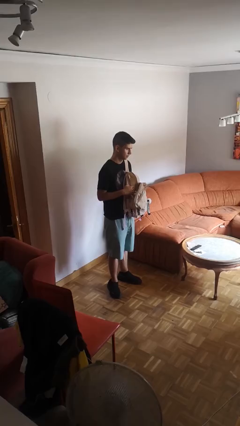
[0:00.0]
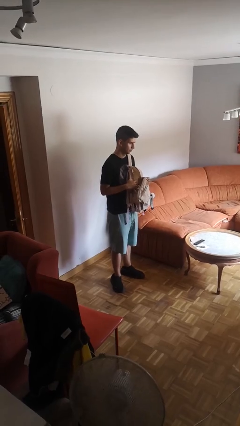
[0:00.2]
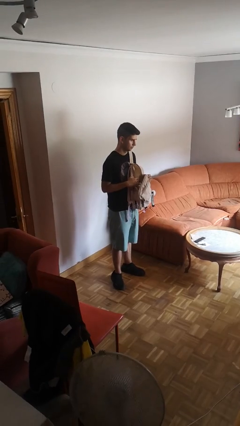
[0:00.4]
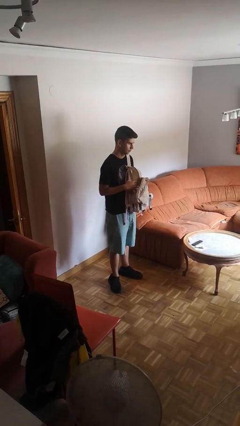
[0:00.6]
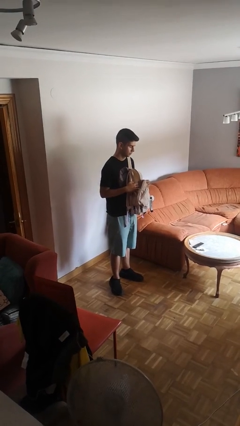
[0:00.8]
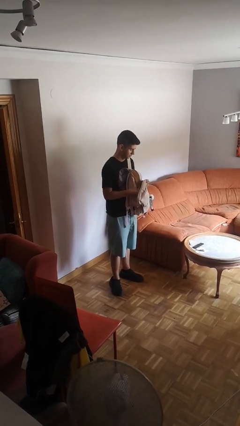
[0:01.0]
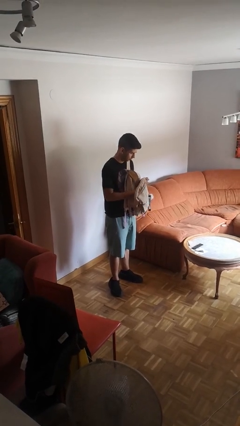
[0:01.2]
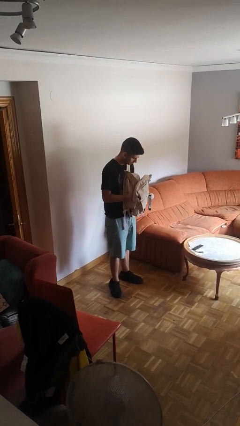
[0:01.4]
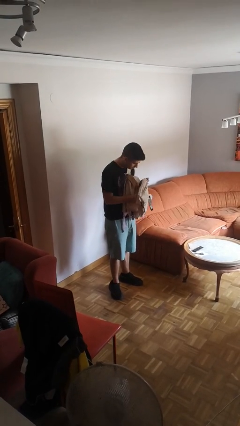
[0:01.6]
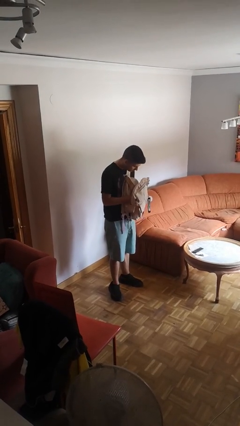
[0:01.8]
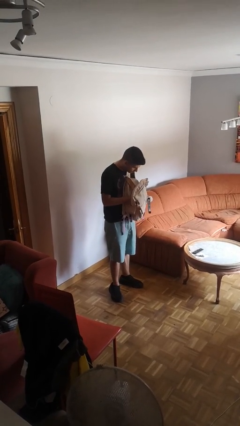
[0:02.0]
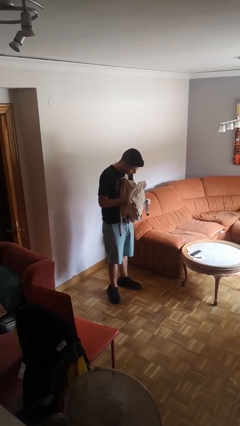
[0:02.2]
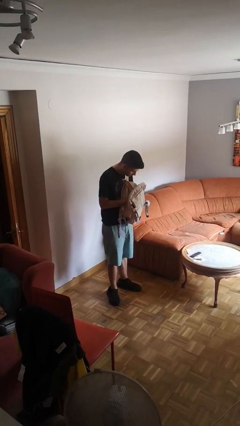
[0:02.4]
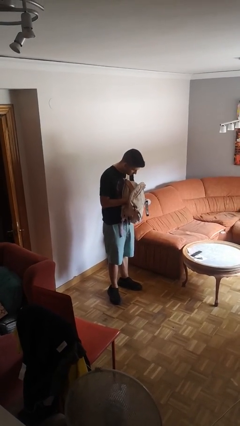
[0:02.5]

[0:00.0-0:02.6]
person searches in backpack

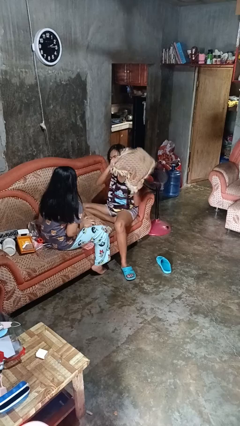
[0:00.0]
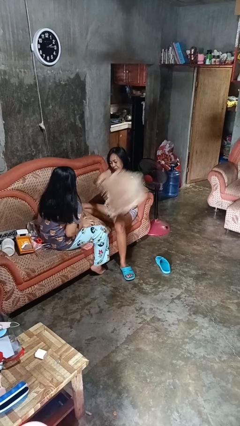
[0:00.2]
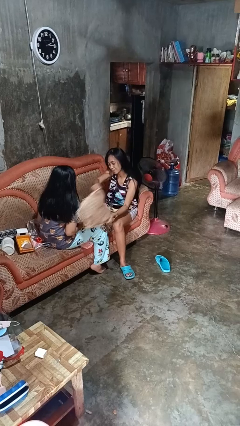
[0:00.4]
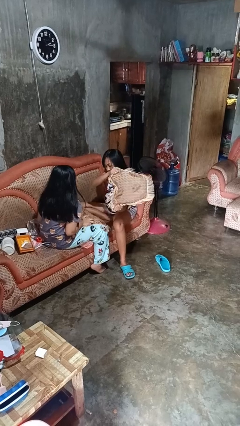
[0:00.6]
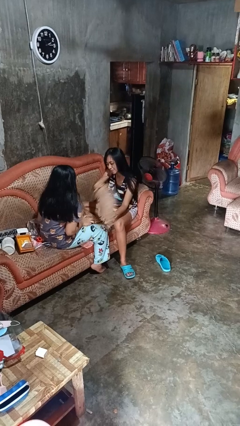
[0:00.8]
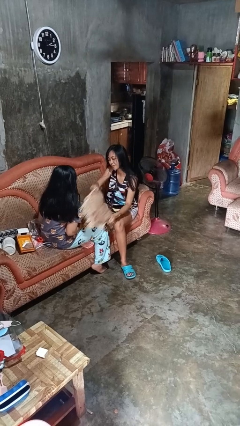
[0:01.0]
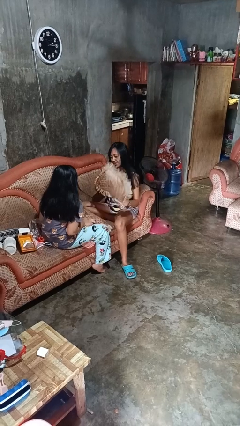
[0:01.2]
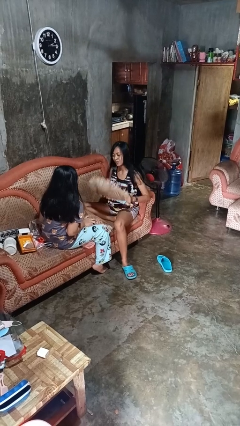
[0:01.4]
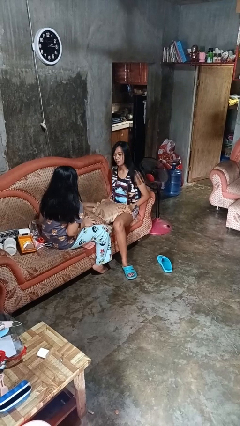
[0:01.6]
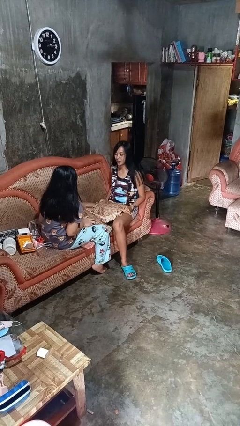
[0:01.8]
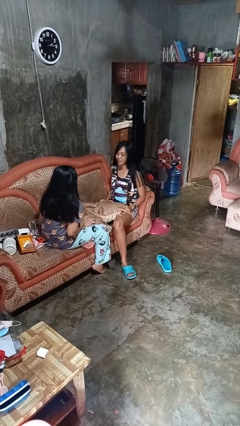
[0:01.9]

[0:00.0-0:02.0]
person hits person with pillow

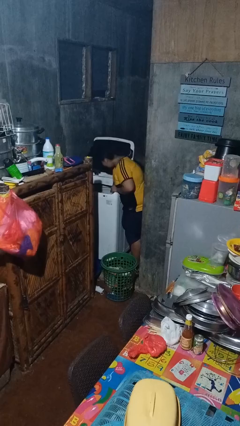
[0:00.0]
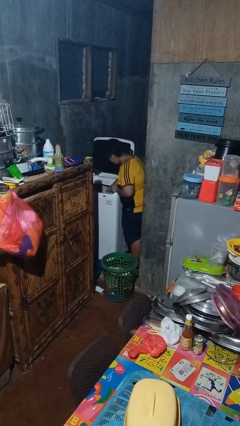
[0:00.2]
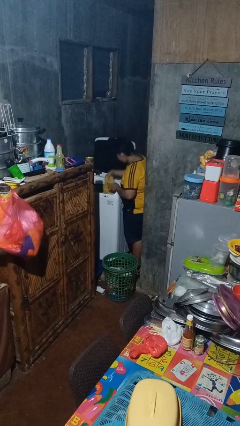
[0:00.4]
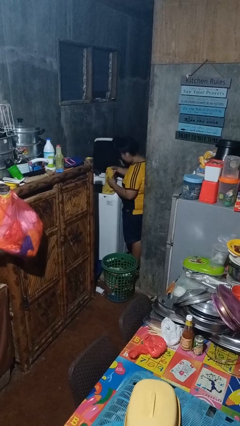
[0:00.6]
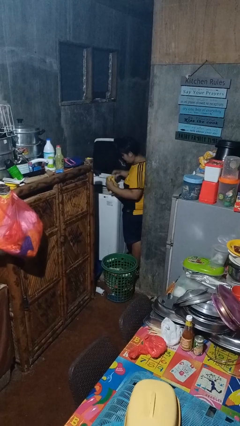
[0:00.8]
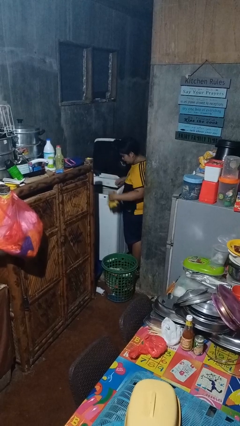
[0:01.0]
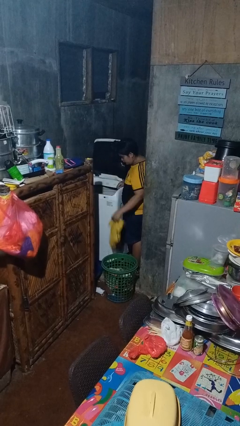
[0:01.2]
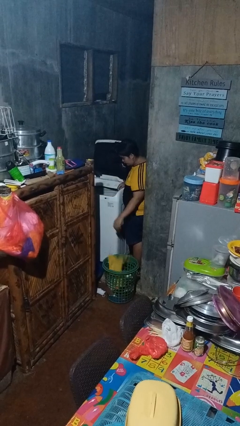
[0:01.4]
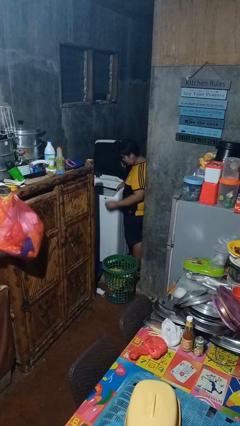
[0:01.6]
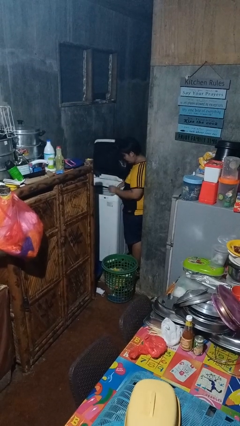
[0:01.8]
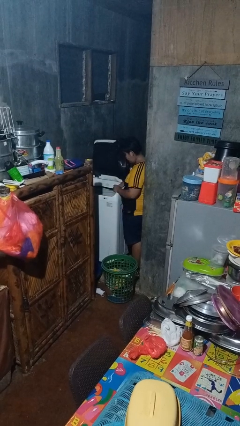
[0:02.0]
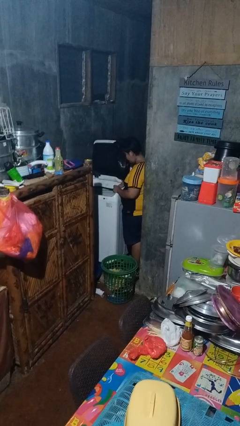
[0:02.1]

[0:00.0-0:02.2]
person unloads clotheswasher

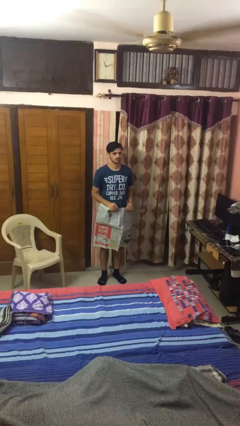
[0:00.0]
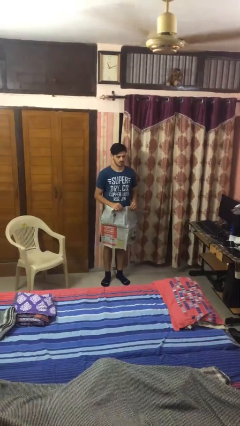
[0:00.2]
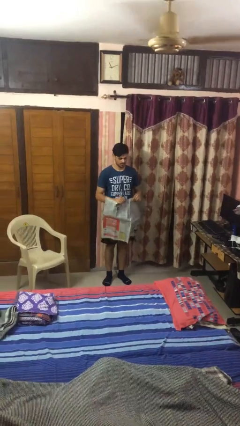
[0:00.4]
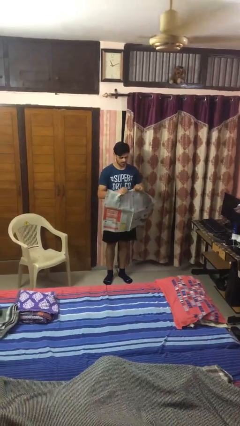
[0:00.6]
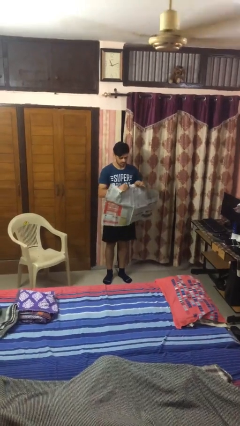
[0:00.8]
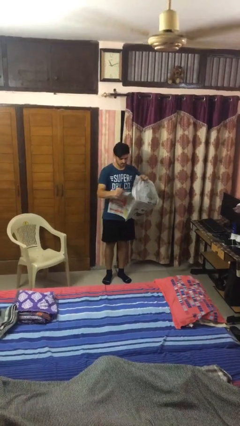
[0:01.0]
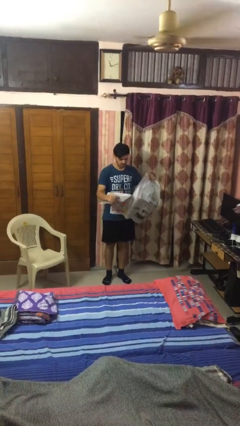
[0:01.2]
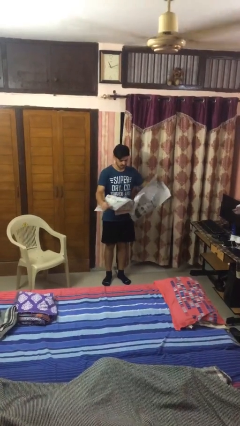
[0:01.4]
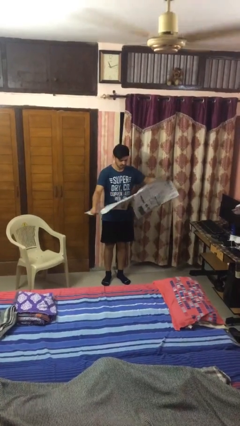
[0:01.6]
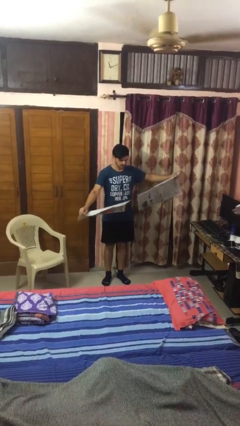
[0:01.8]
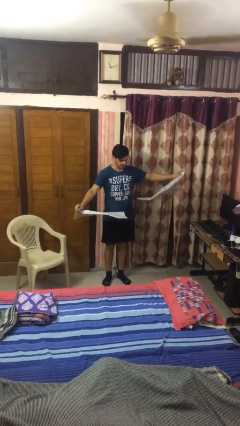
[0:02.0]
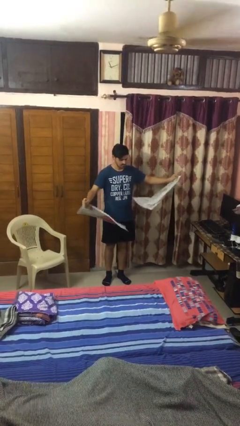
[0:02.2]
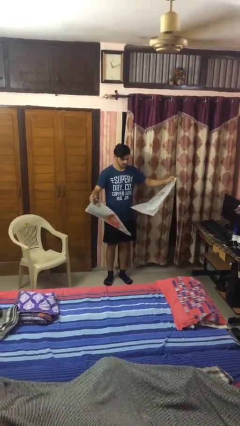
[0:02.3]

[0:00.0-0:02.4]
person tears paper

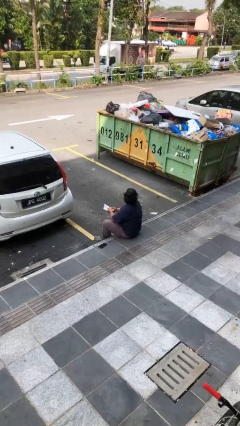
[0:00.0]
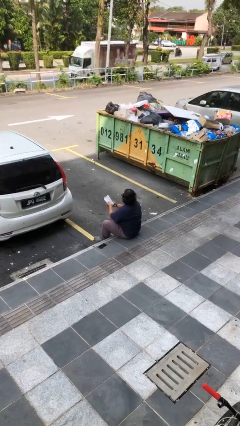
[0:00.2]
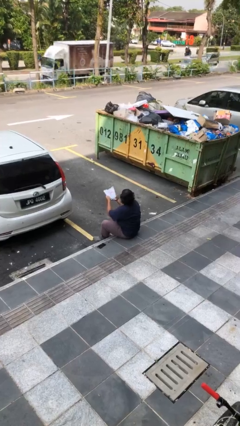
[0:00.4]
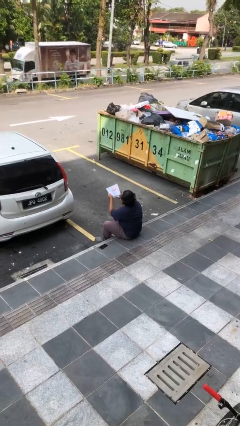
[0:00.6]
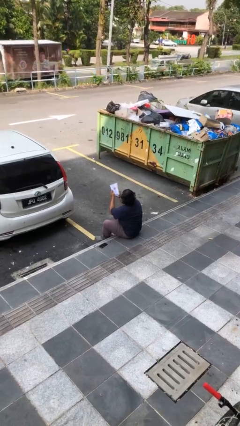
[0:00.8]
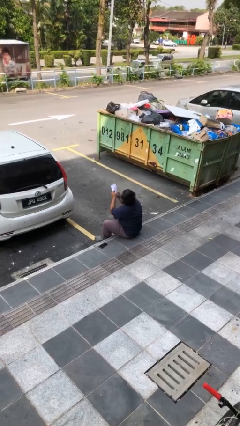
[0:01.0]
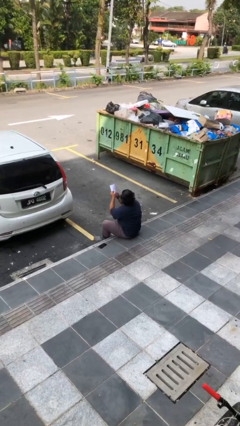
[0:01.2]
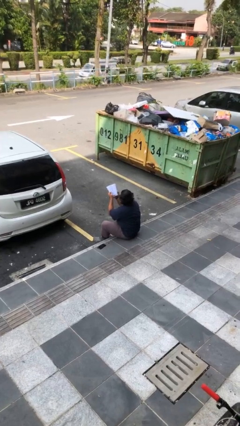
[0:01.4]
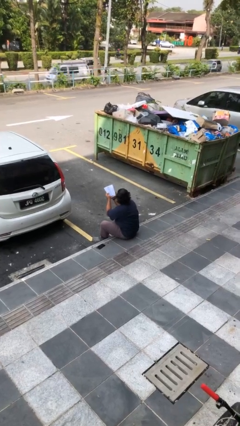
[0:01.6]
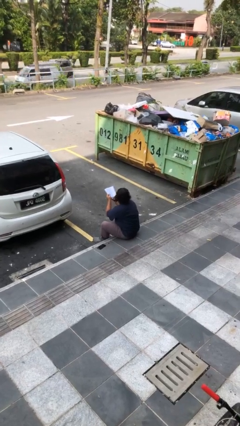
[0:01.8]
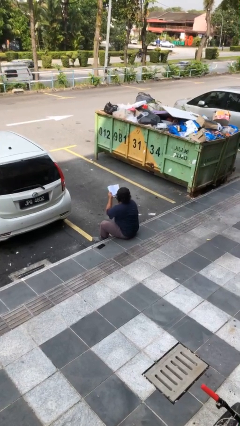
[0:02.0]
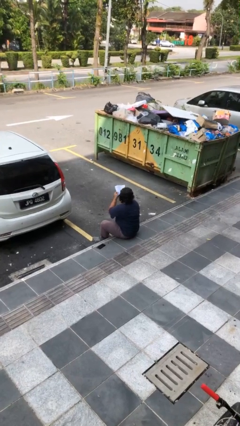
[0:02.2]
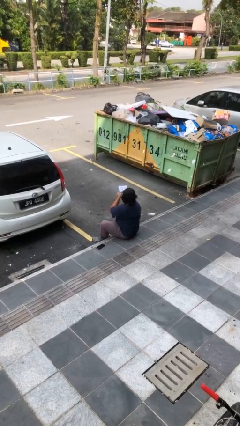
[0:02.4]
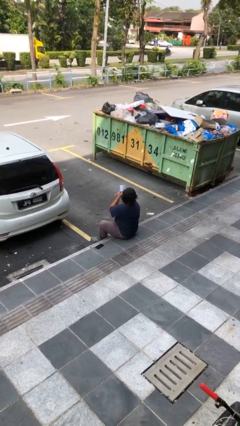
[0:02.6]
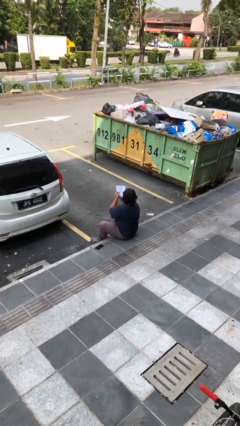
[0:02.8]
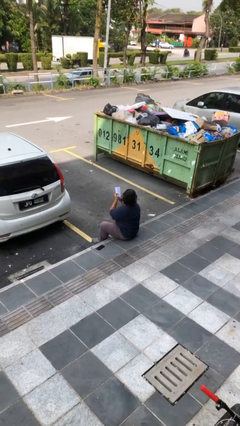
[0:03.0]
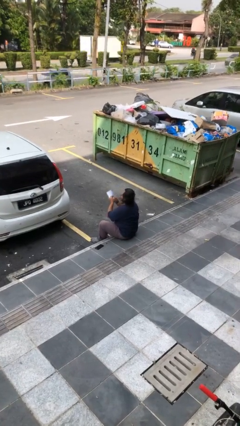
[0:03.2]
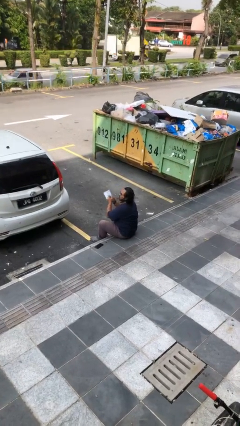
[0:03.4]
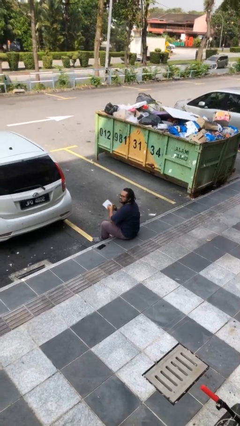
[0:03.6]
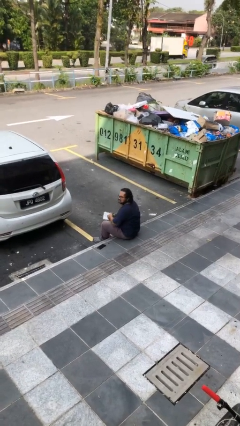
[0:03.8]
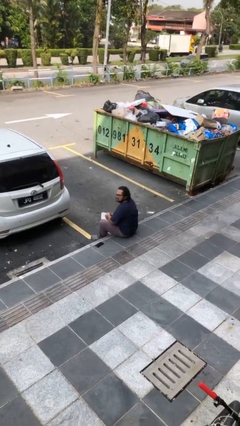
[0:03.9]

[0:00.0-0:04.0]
person reads document

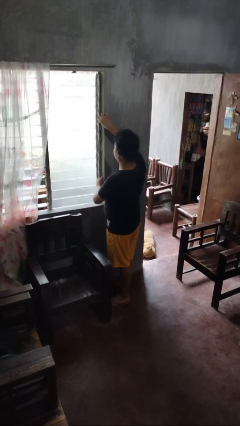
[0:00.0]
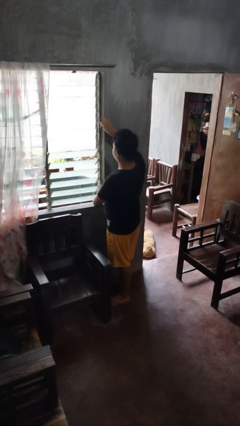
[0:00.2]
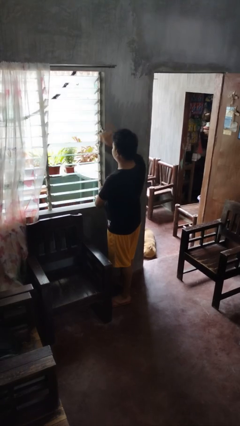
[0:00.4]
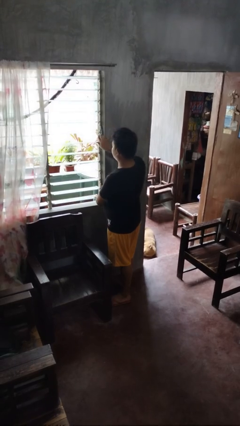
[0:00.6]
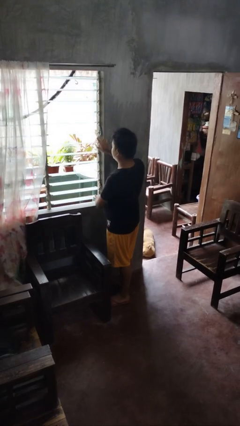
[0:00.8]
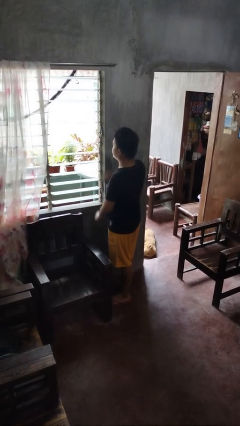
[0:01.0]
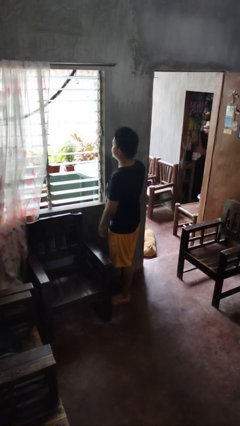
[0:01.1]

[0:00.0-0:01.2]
person opens home window

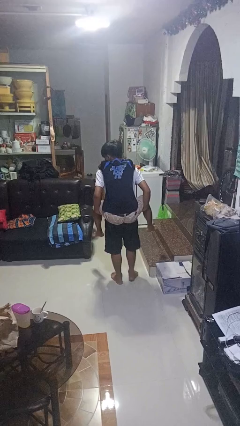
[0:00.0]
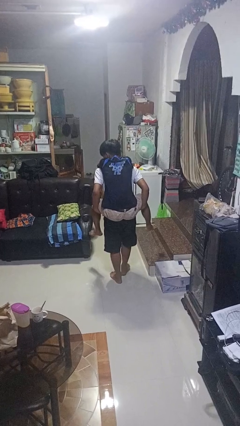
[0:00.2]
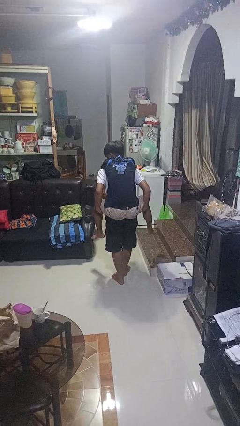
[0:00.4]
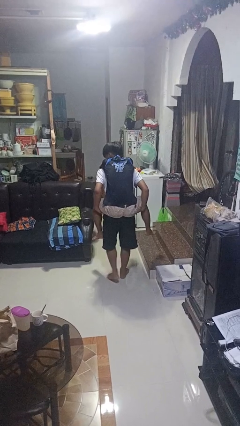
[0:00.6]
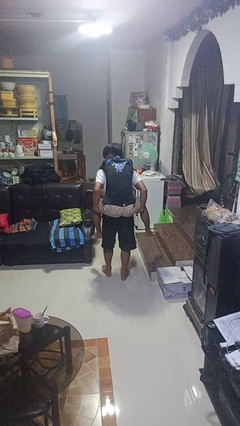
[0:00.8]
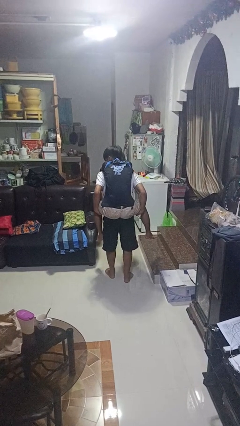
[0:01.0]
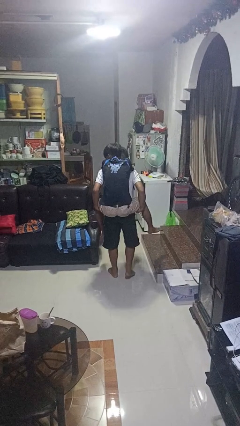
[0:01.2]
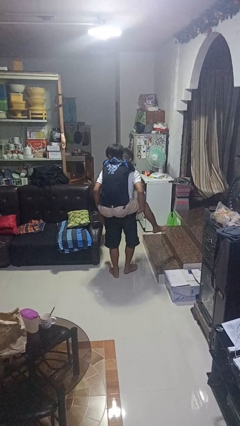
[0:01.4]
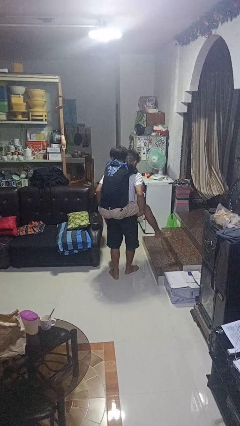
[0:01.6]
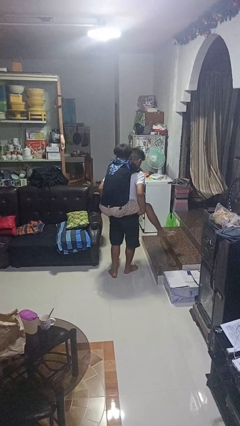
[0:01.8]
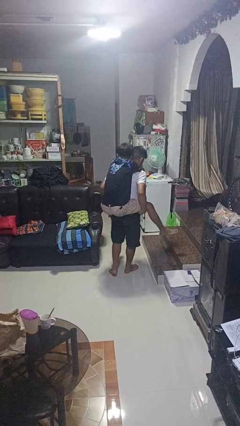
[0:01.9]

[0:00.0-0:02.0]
person carries person on back

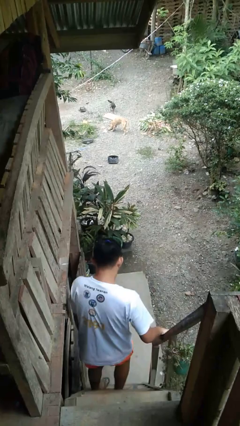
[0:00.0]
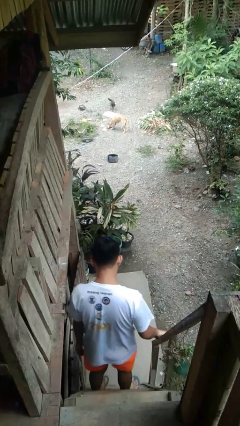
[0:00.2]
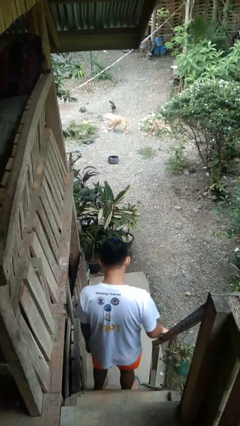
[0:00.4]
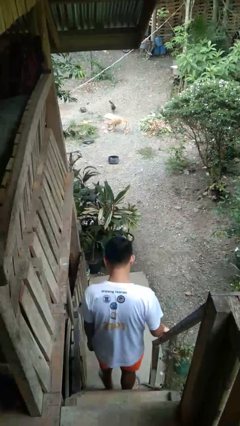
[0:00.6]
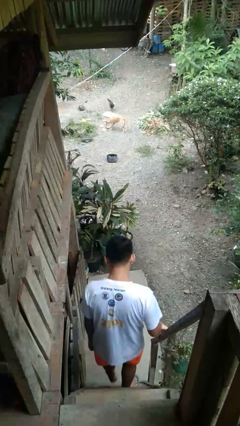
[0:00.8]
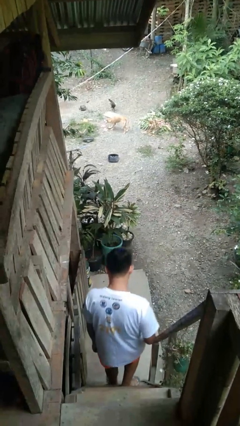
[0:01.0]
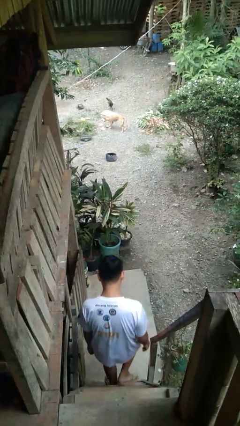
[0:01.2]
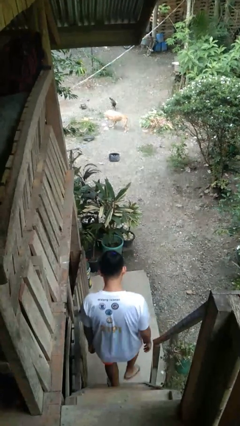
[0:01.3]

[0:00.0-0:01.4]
person climbs down stairs
